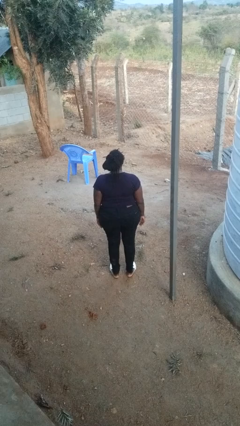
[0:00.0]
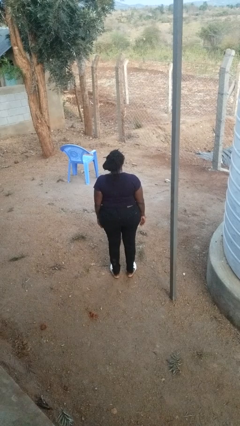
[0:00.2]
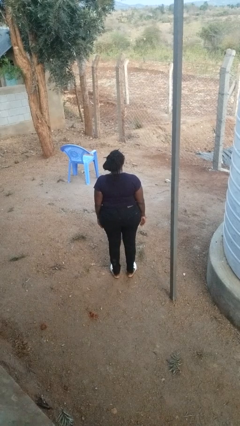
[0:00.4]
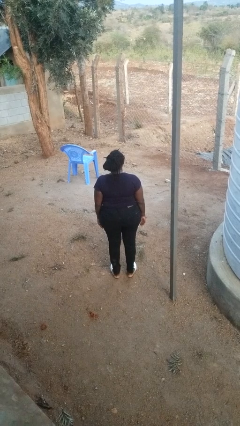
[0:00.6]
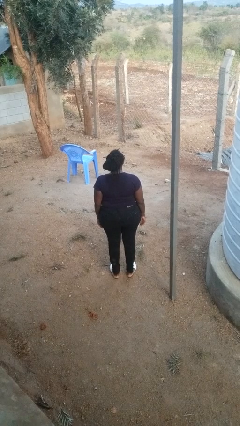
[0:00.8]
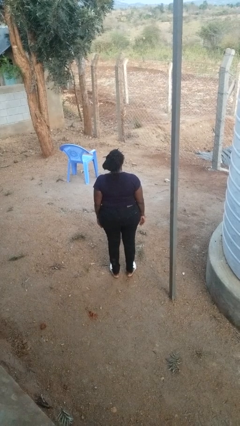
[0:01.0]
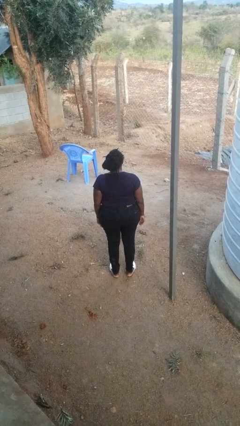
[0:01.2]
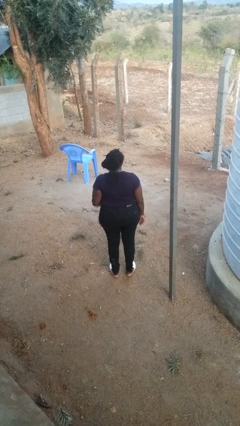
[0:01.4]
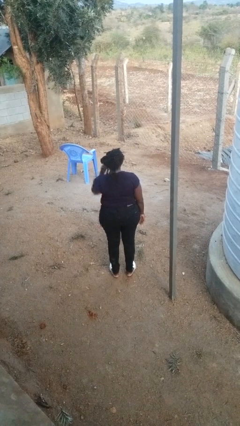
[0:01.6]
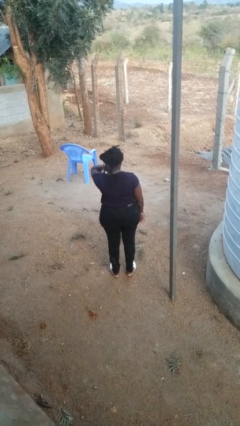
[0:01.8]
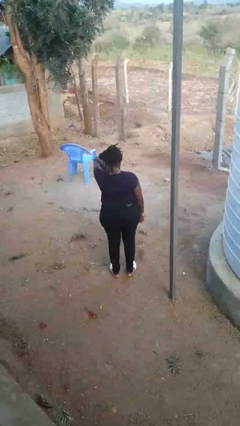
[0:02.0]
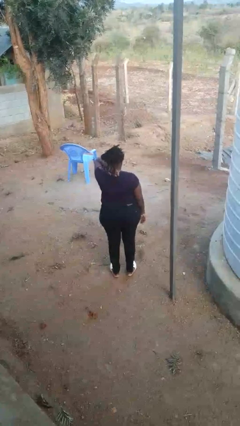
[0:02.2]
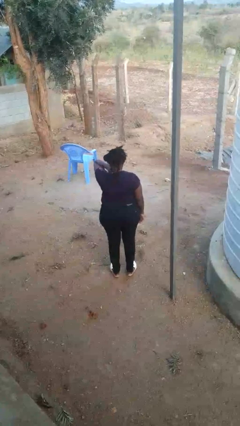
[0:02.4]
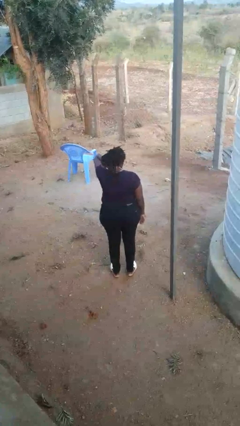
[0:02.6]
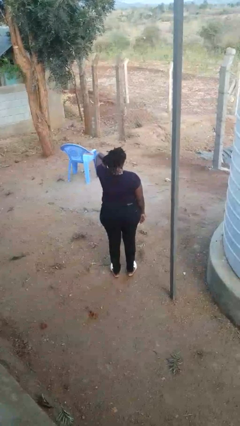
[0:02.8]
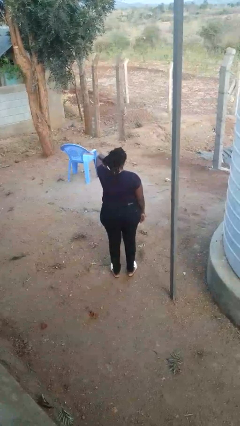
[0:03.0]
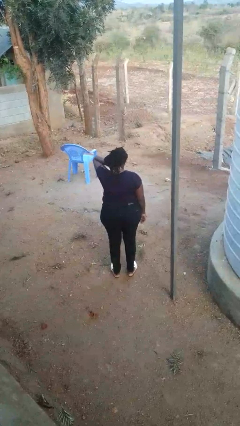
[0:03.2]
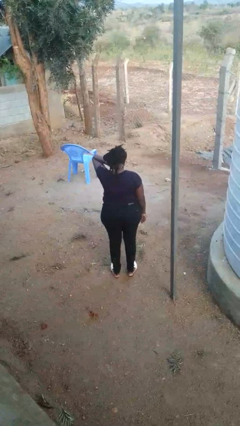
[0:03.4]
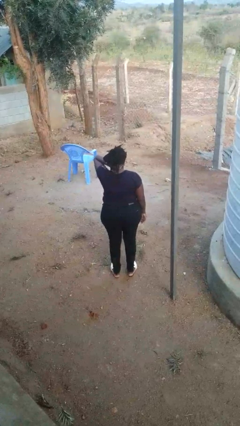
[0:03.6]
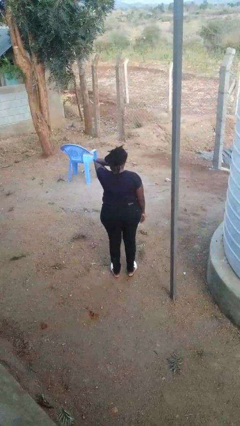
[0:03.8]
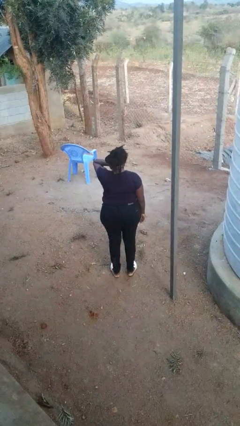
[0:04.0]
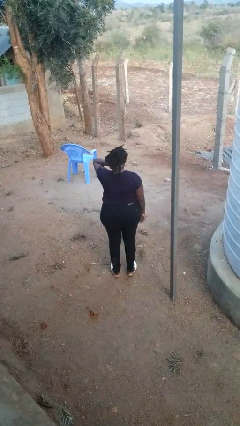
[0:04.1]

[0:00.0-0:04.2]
person rubs neck

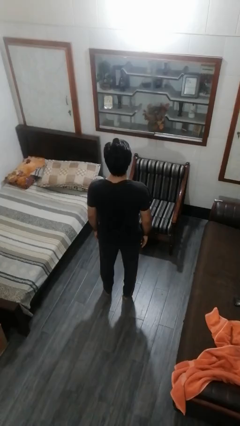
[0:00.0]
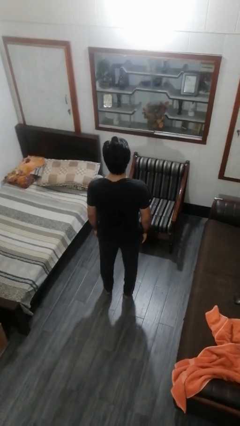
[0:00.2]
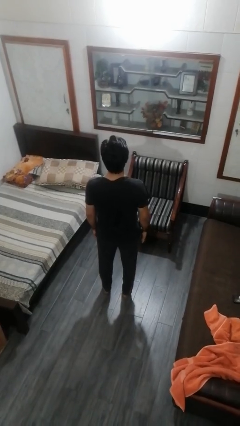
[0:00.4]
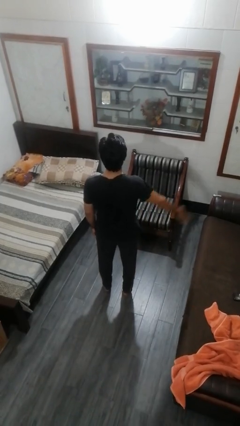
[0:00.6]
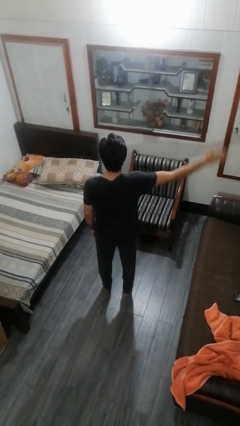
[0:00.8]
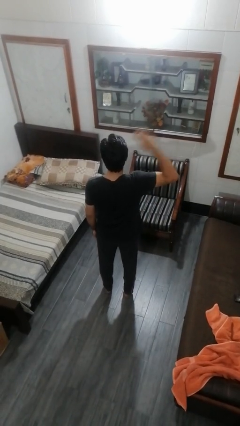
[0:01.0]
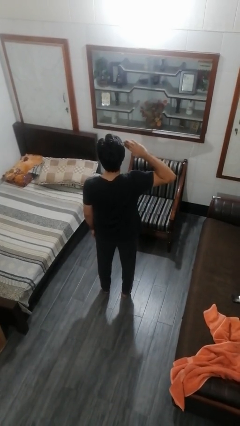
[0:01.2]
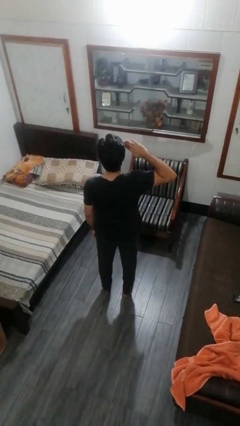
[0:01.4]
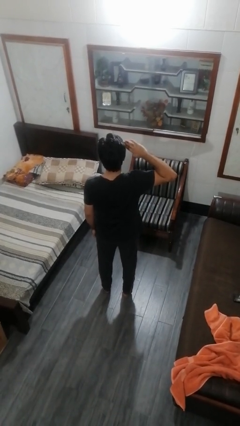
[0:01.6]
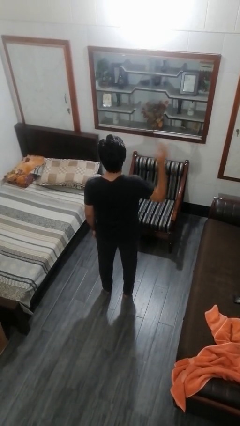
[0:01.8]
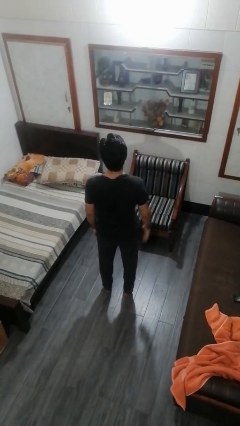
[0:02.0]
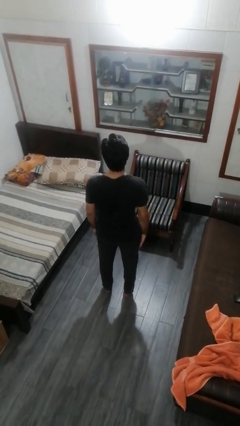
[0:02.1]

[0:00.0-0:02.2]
person salutes

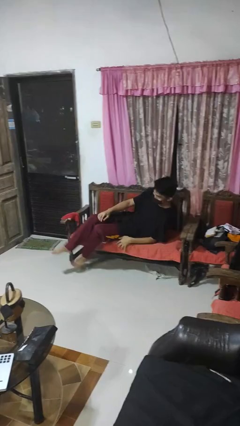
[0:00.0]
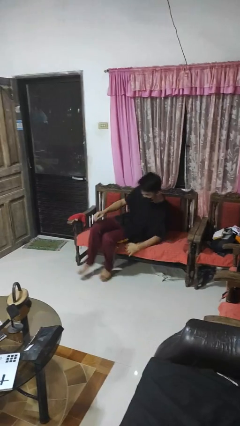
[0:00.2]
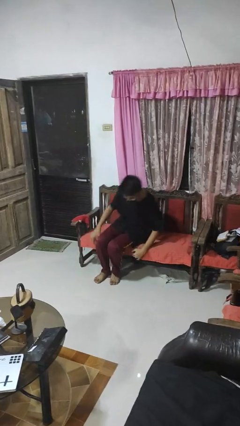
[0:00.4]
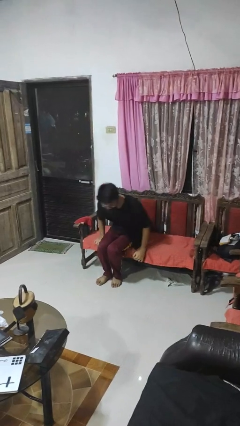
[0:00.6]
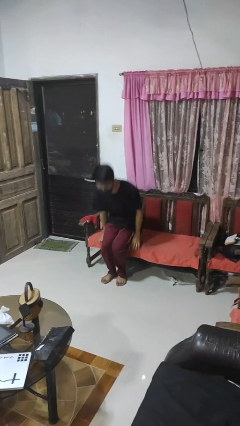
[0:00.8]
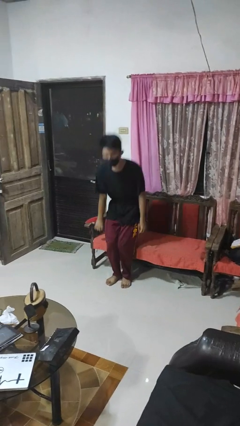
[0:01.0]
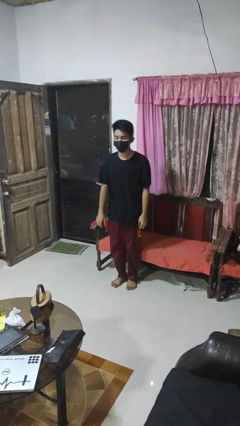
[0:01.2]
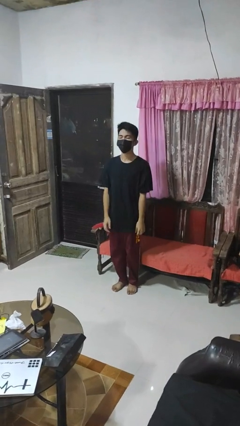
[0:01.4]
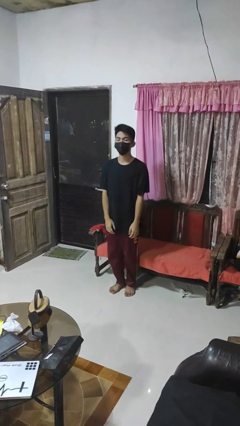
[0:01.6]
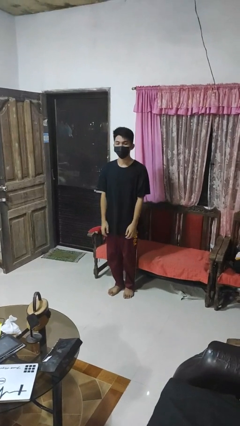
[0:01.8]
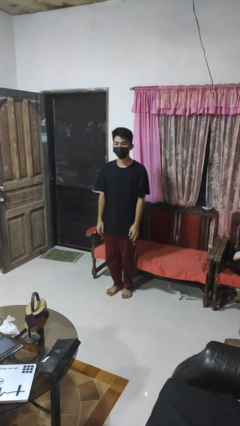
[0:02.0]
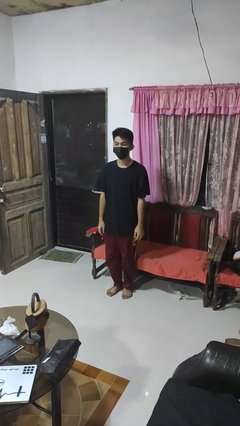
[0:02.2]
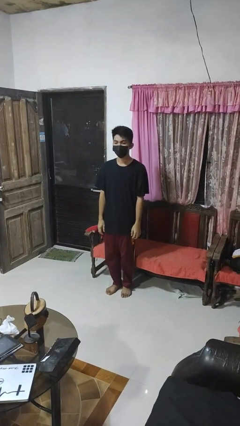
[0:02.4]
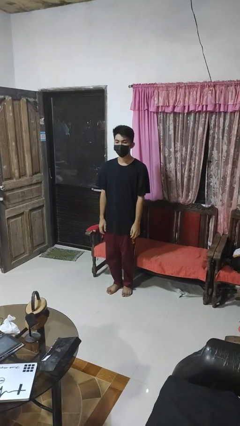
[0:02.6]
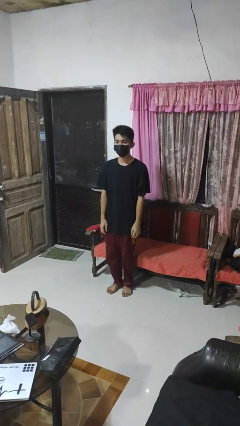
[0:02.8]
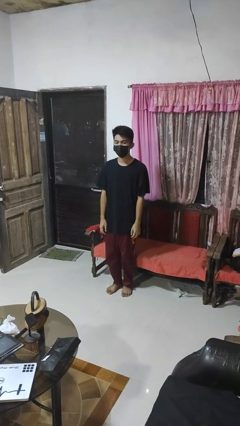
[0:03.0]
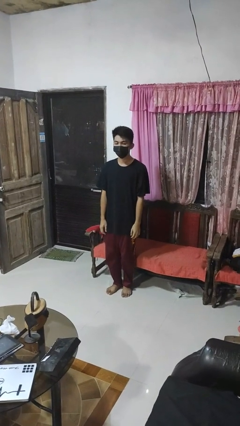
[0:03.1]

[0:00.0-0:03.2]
person stands up

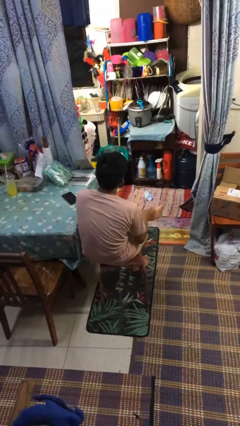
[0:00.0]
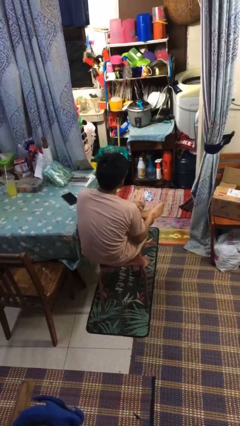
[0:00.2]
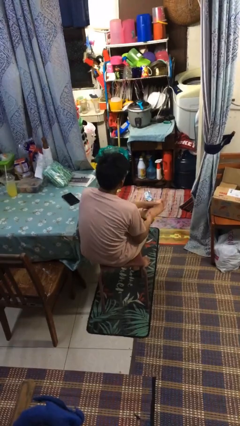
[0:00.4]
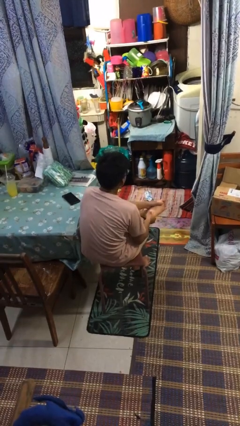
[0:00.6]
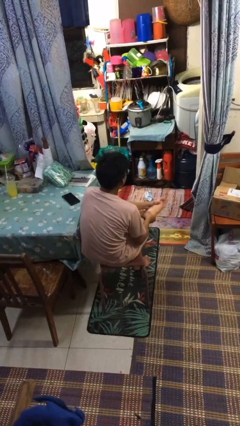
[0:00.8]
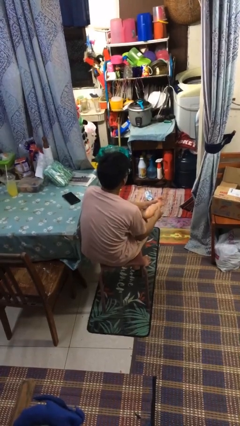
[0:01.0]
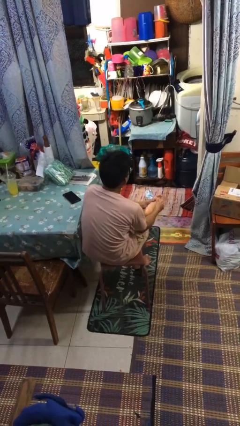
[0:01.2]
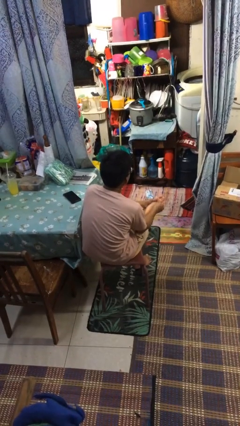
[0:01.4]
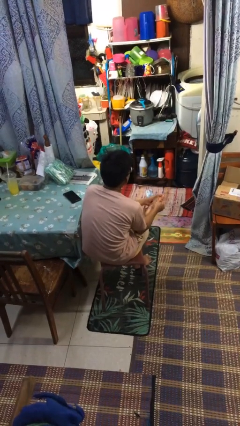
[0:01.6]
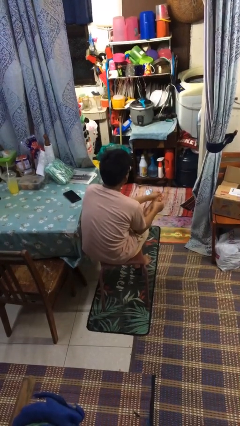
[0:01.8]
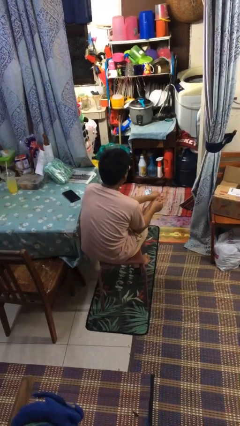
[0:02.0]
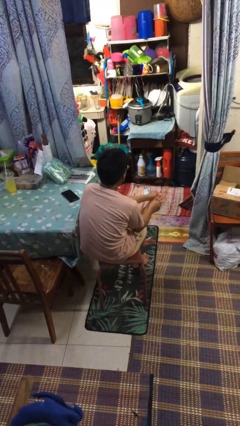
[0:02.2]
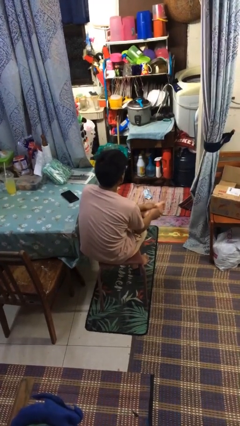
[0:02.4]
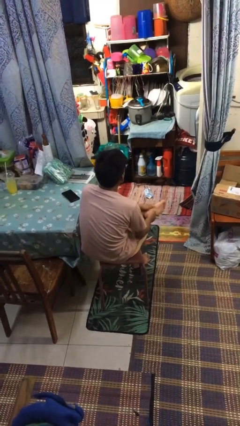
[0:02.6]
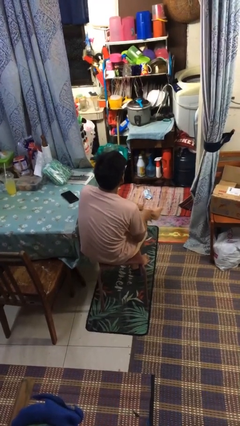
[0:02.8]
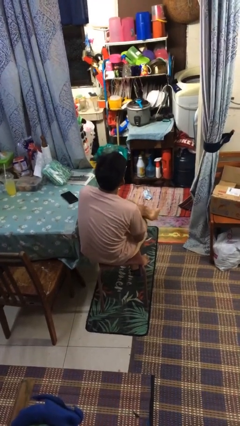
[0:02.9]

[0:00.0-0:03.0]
person rubs foot

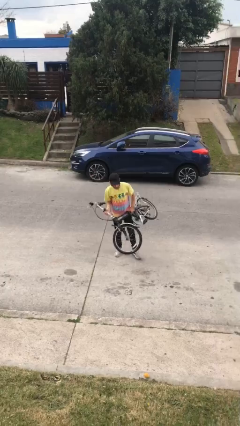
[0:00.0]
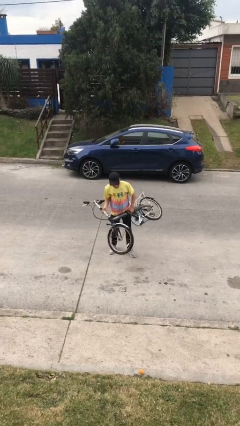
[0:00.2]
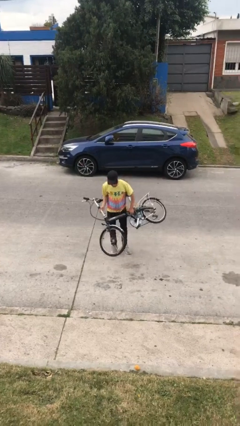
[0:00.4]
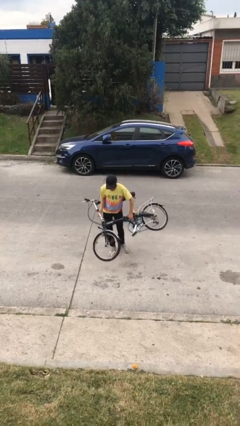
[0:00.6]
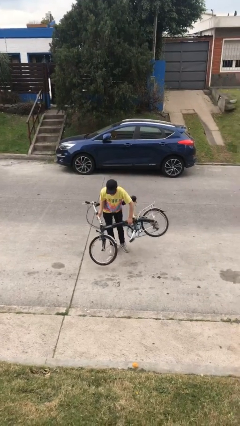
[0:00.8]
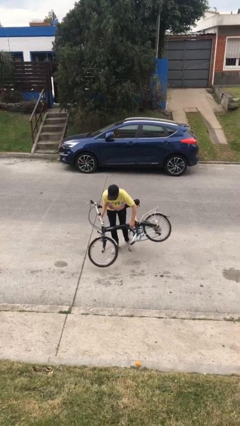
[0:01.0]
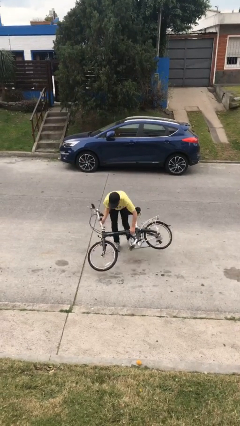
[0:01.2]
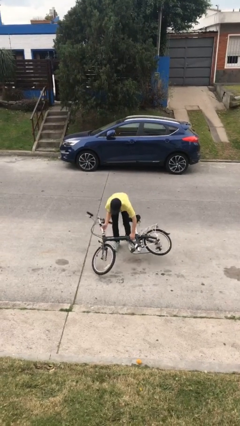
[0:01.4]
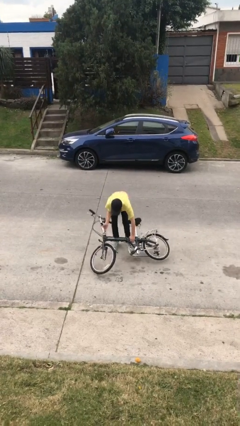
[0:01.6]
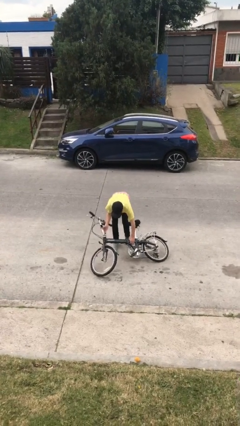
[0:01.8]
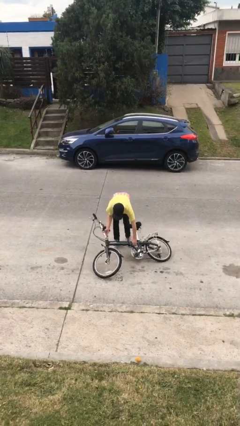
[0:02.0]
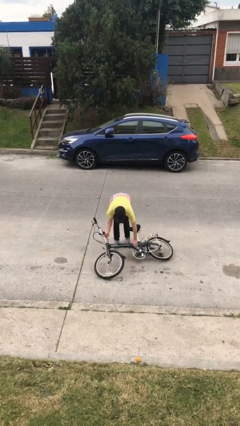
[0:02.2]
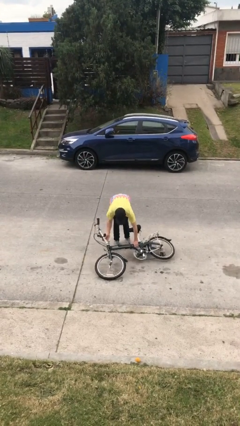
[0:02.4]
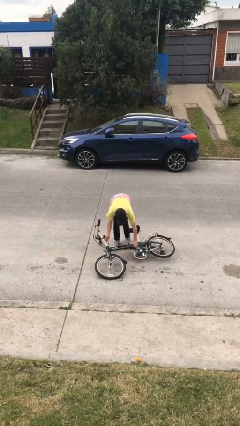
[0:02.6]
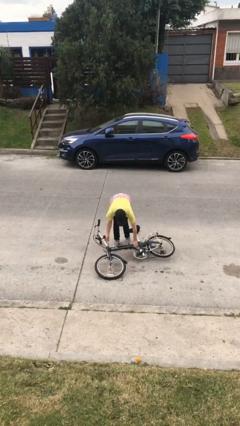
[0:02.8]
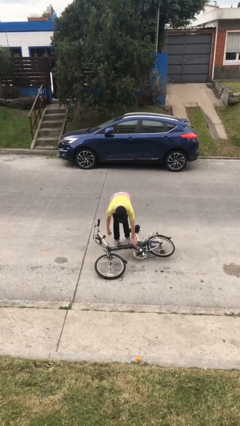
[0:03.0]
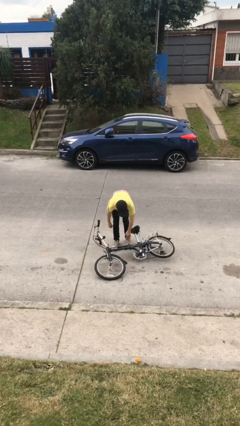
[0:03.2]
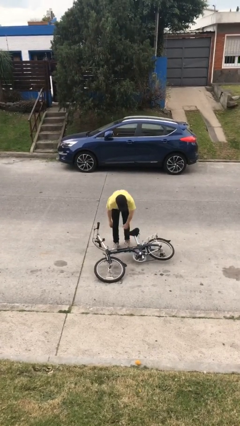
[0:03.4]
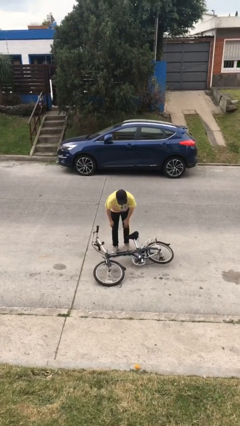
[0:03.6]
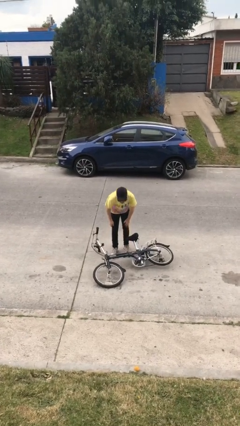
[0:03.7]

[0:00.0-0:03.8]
person puts down object on floor

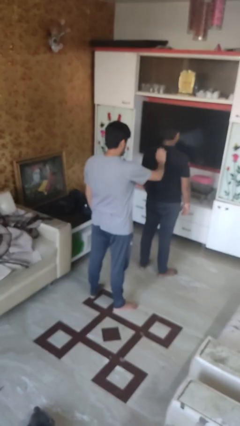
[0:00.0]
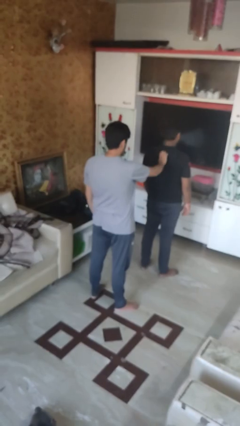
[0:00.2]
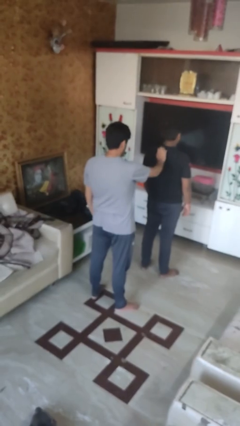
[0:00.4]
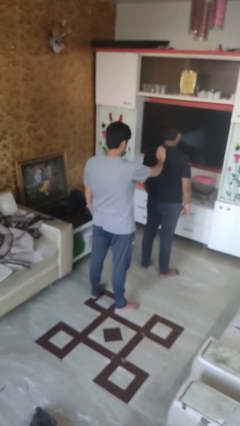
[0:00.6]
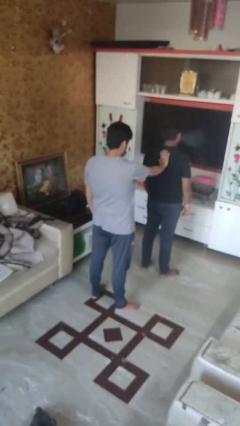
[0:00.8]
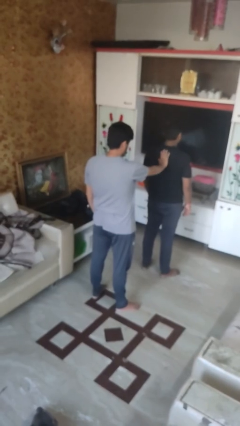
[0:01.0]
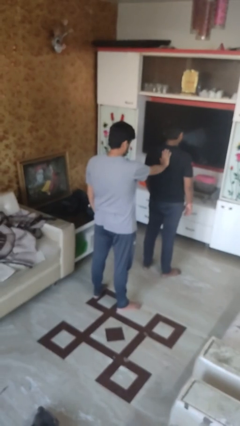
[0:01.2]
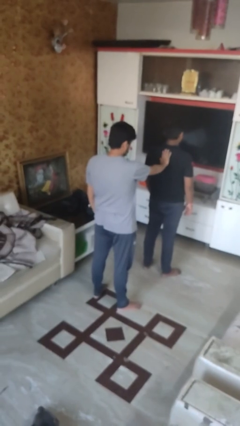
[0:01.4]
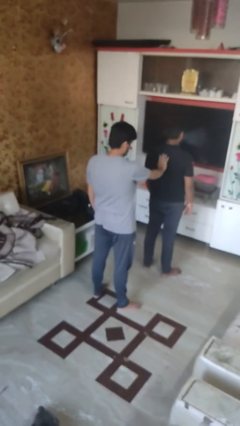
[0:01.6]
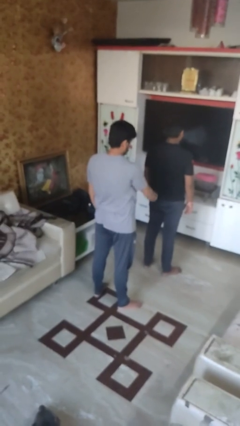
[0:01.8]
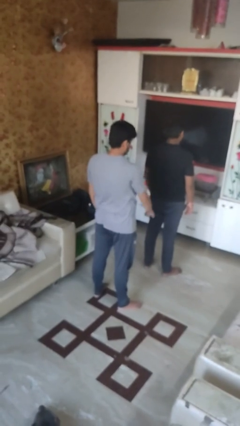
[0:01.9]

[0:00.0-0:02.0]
person touches back of person
